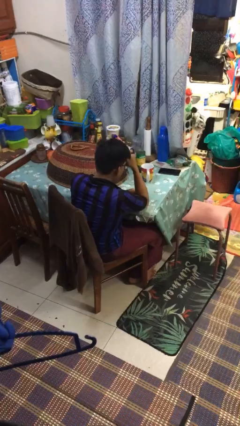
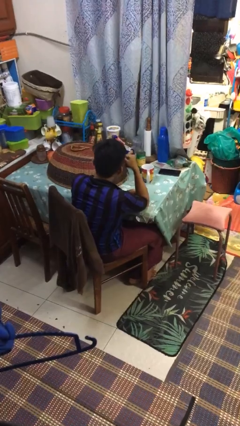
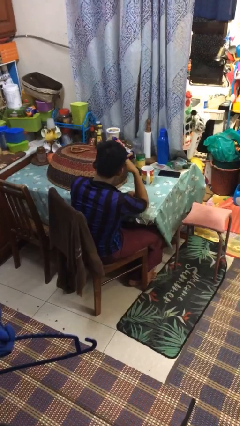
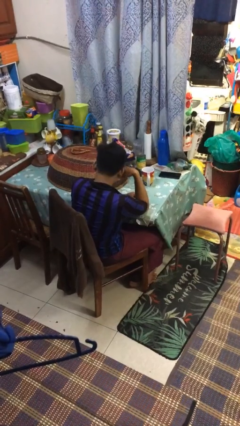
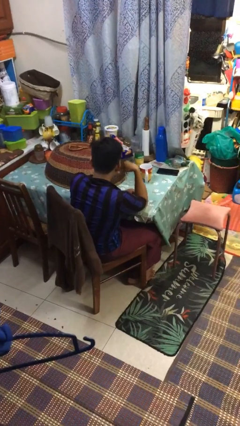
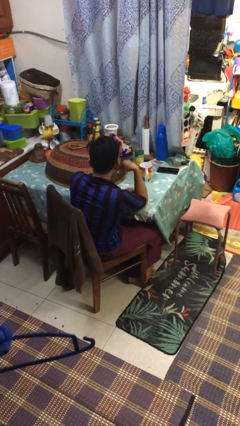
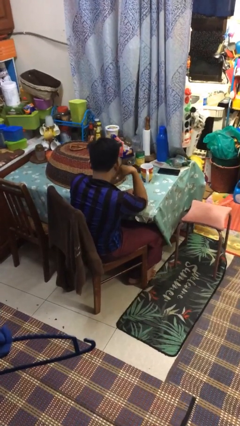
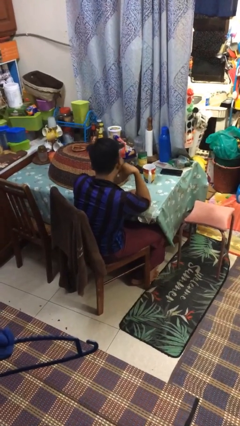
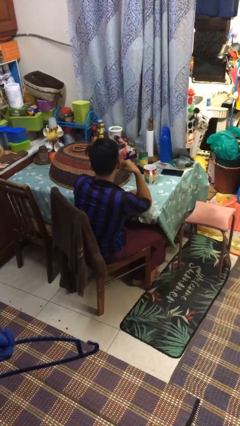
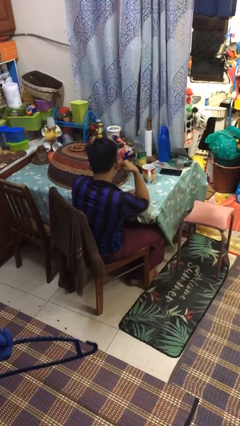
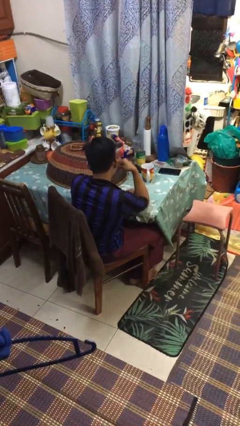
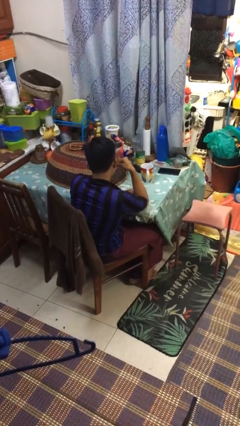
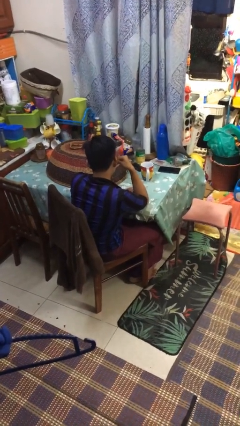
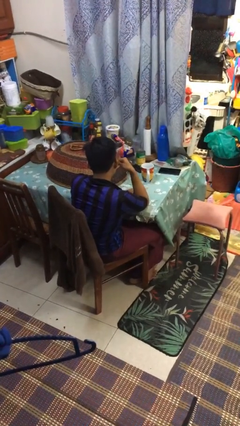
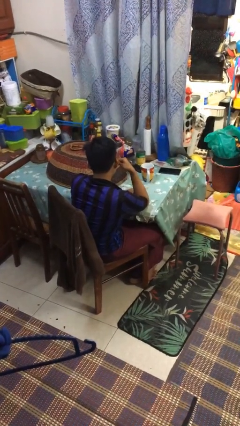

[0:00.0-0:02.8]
person nods head

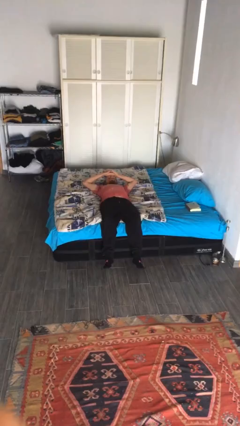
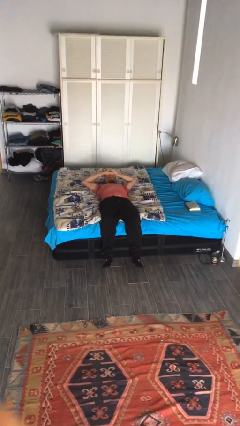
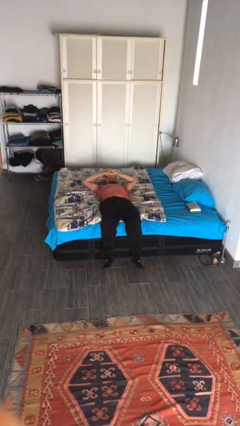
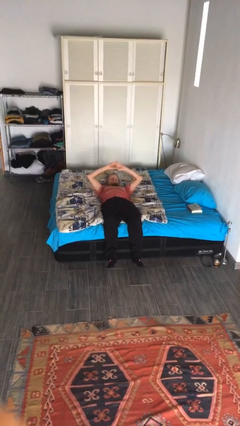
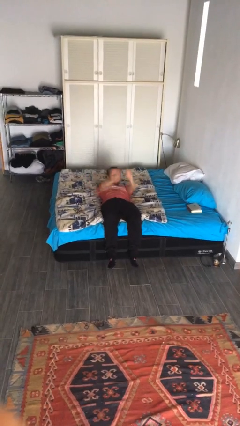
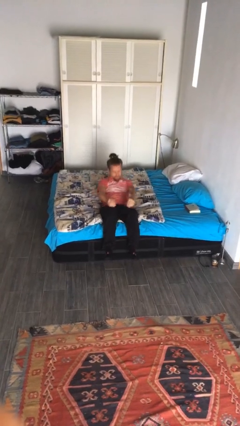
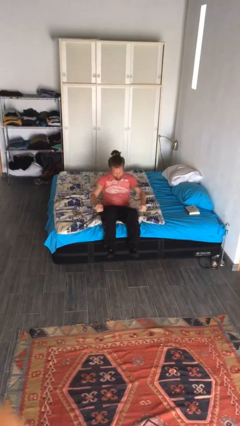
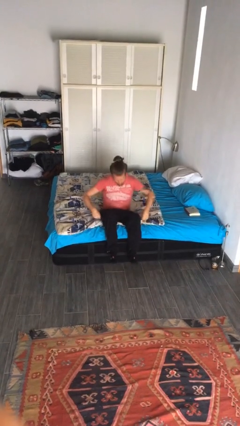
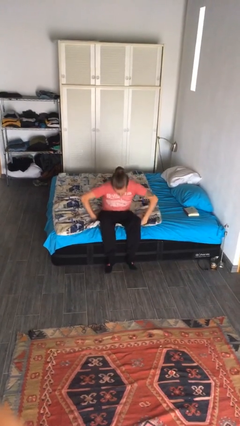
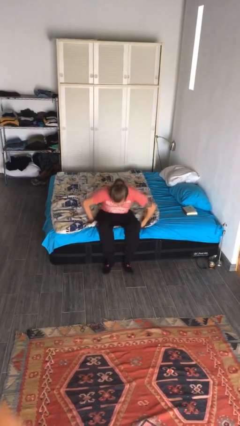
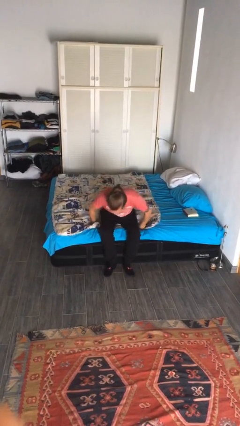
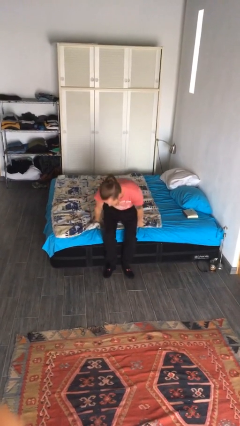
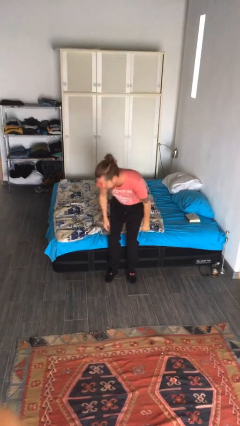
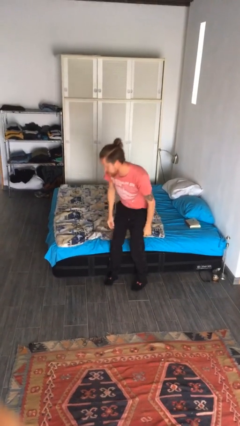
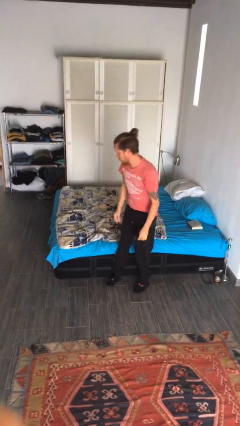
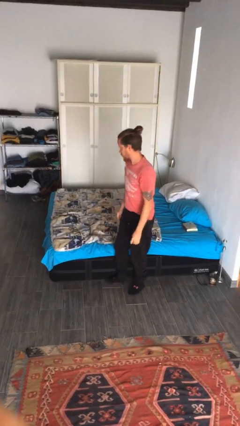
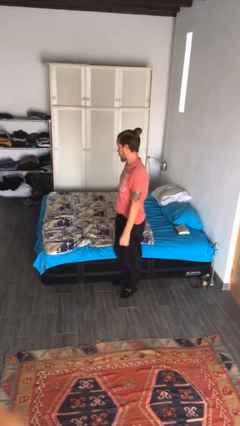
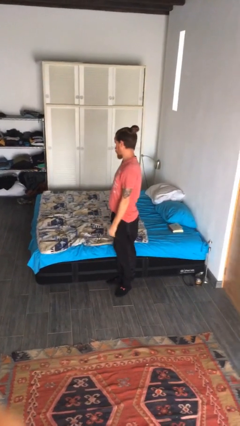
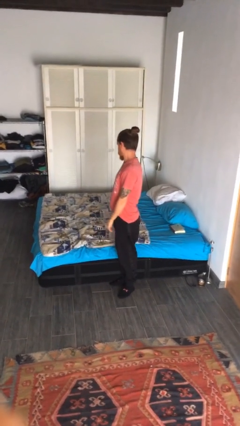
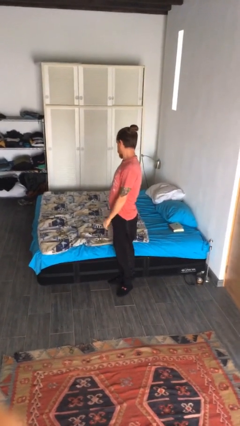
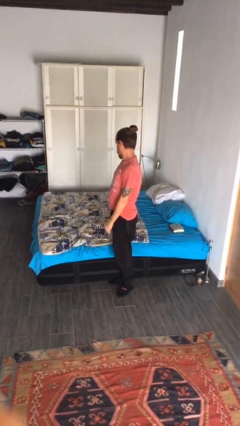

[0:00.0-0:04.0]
person stands up

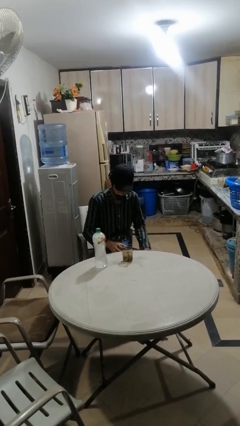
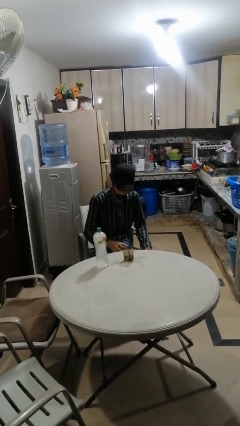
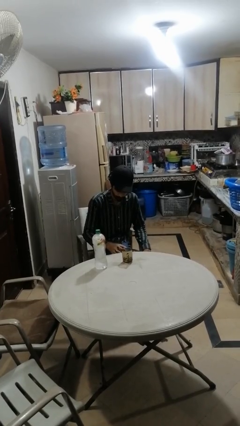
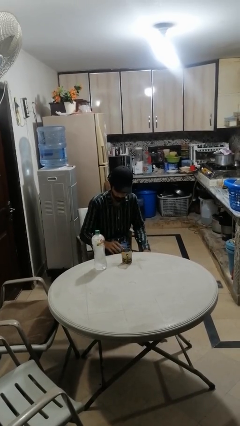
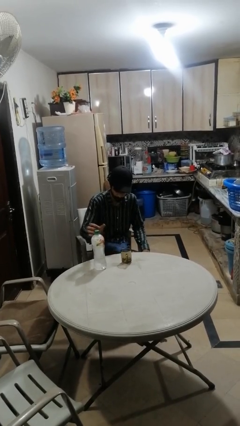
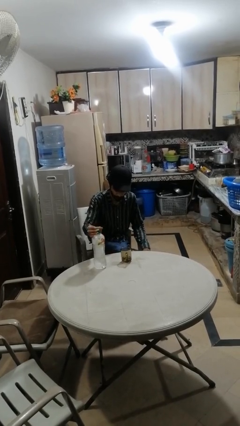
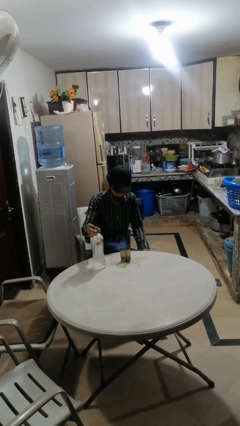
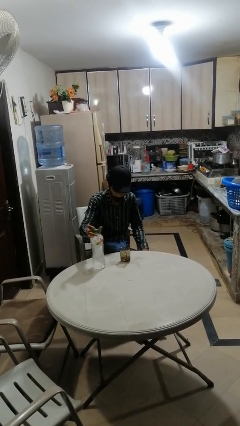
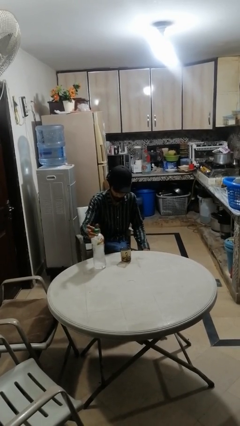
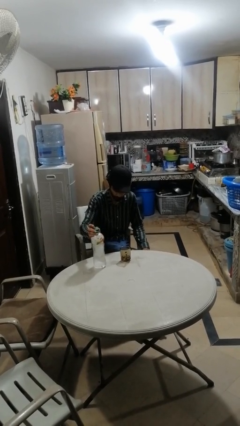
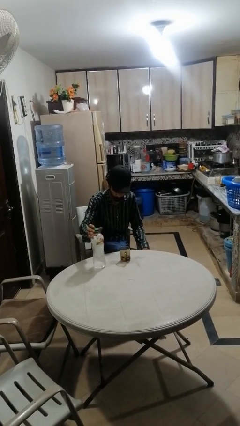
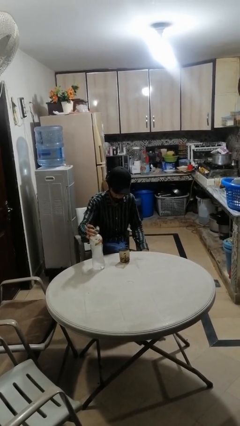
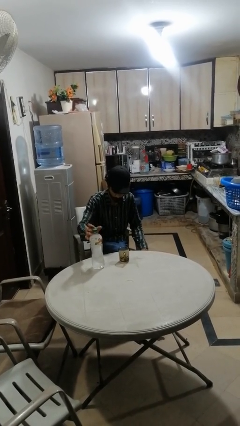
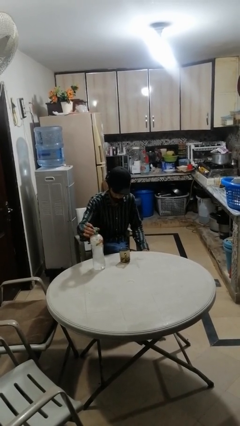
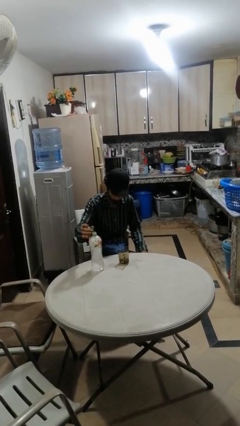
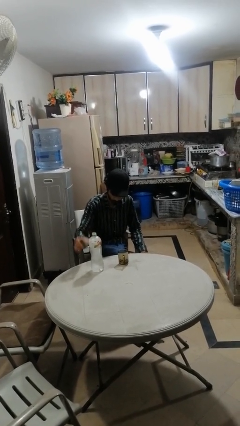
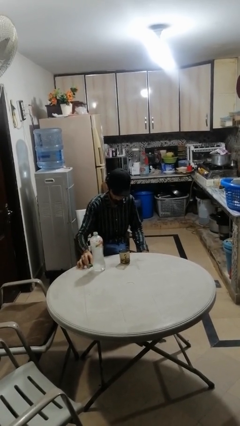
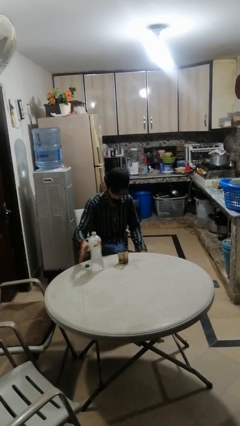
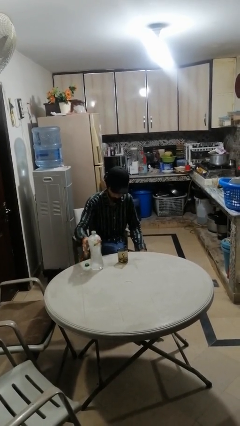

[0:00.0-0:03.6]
person unscrews lid from bottle

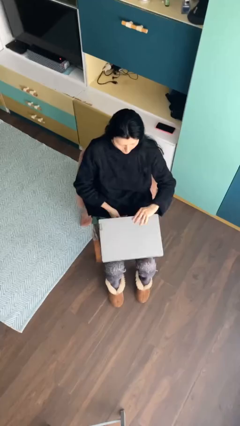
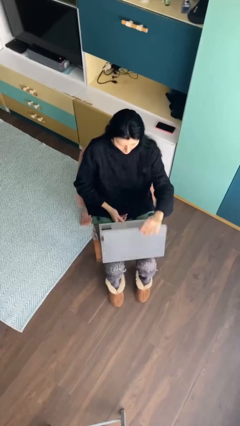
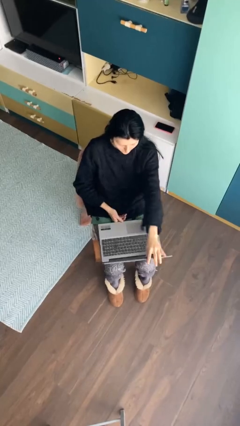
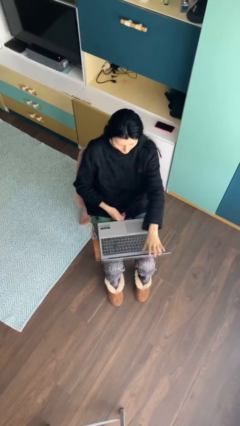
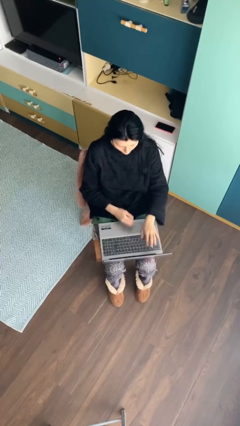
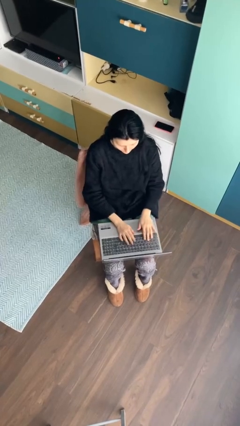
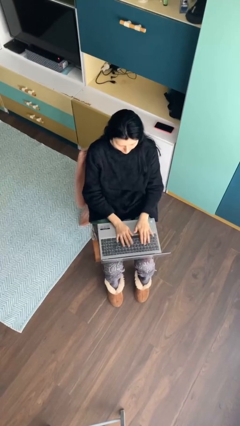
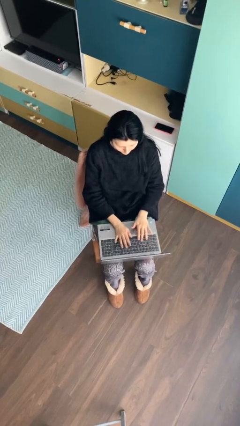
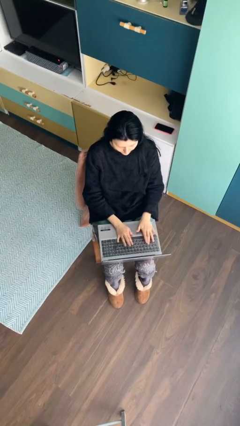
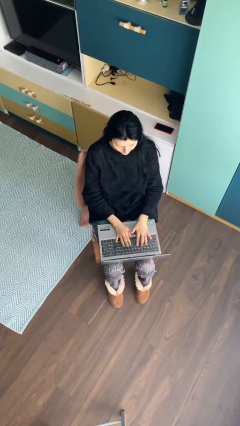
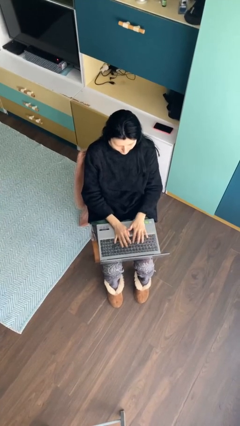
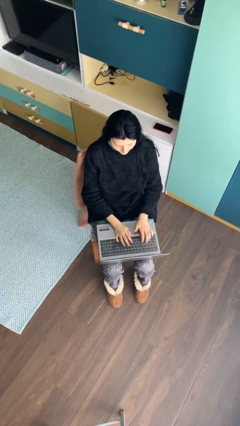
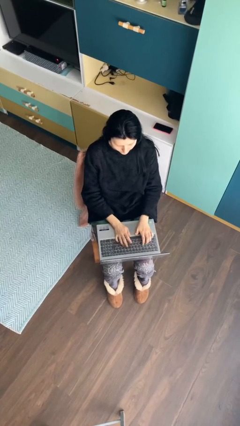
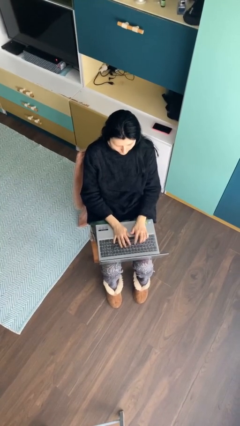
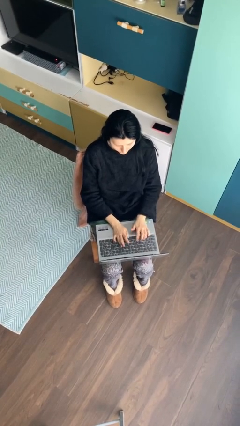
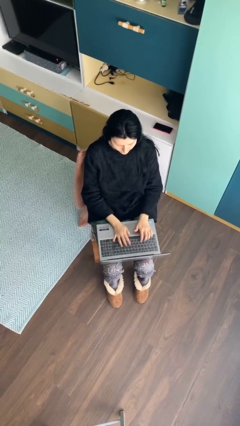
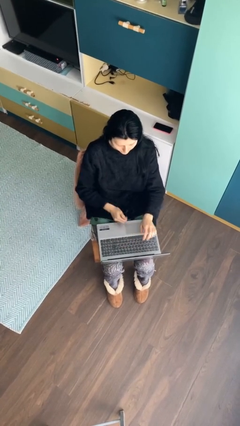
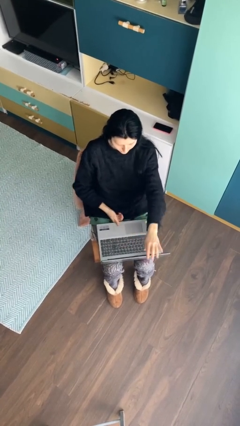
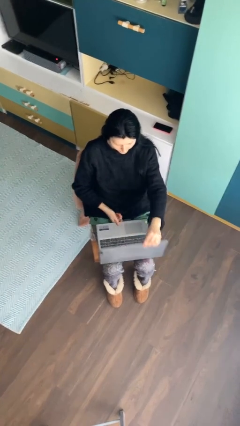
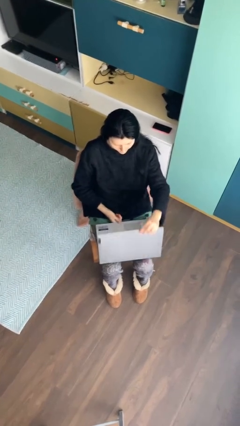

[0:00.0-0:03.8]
person interacts with laptop

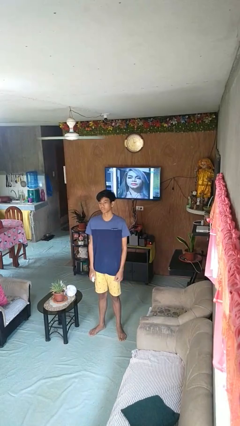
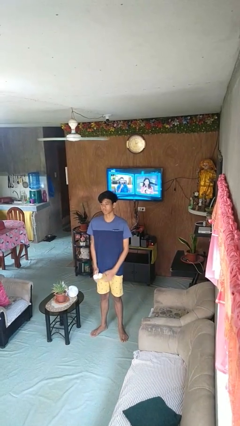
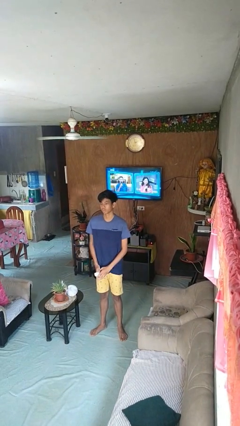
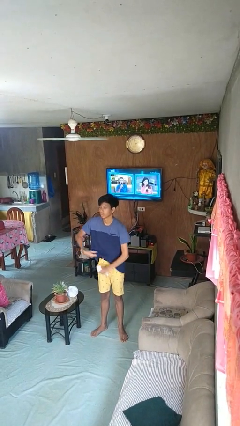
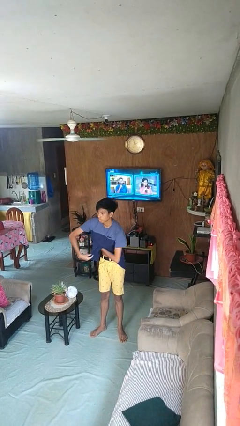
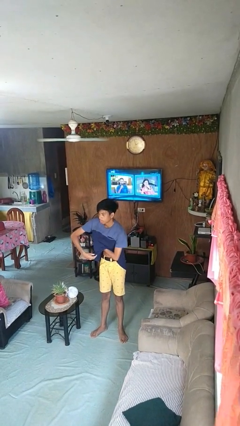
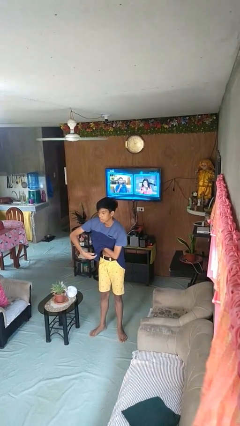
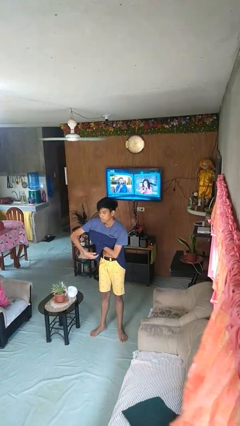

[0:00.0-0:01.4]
person applies deodorant

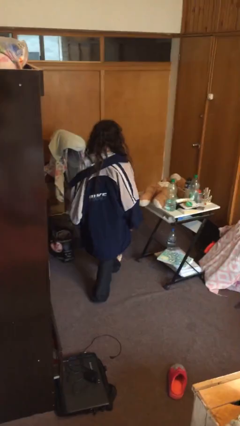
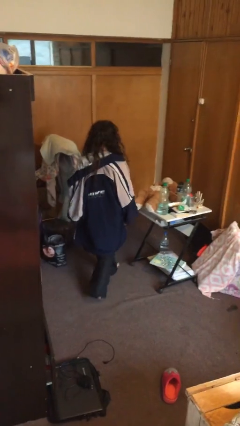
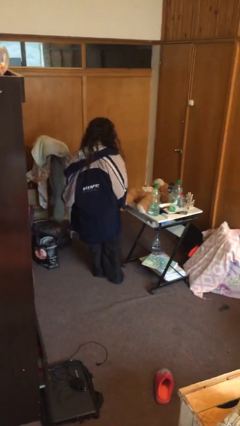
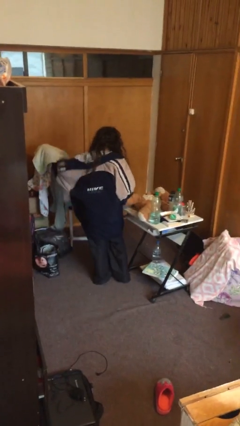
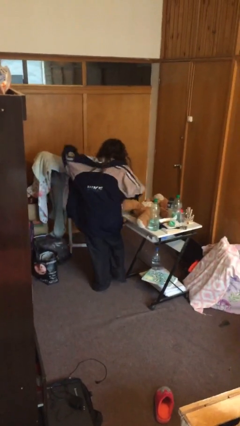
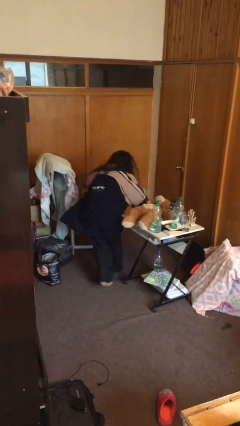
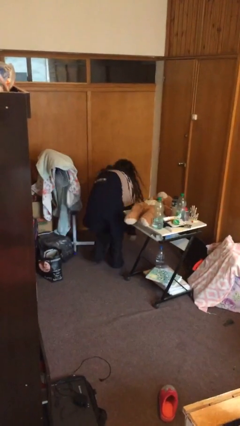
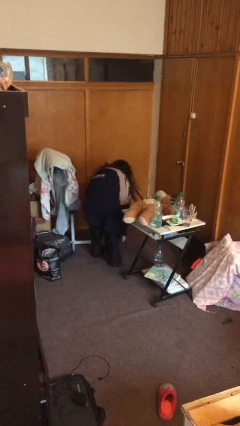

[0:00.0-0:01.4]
person stubs toe

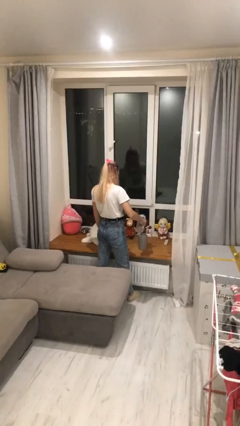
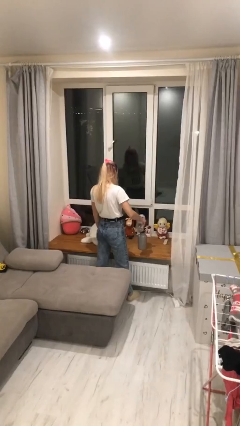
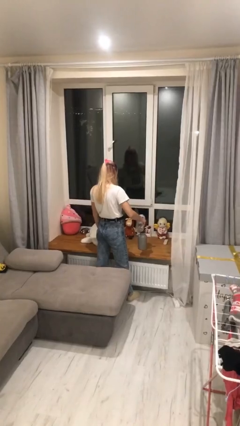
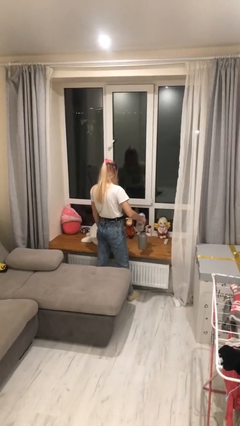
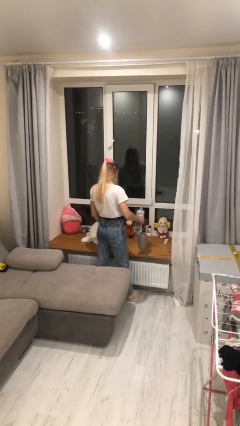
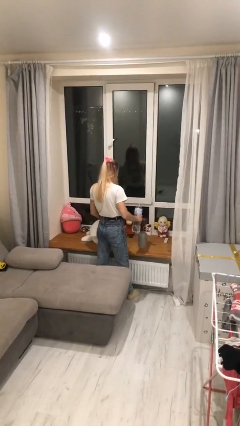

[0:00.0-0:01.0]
person waters houseplant
